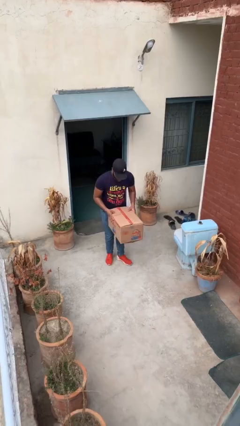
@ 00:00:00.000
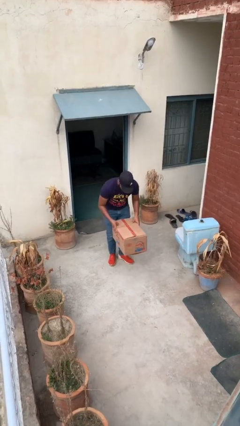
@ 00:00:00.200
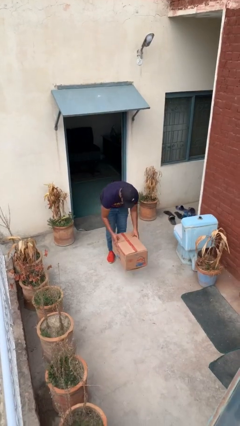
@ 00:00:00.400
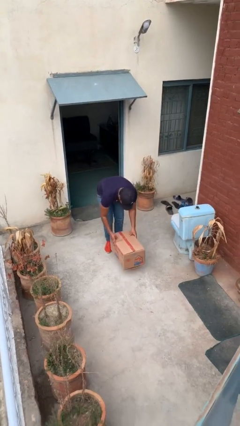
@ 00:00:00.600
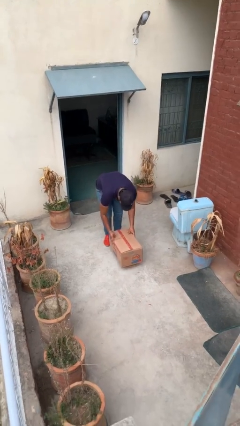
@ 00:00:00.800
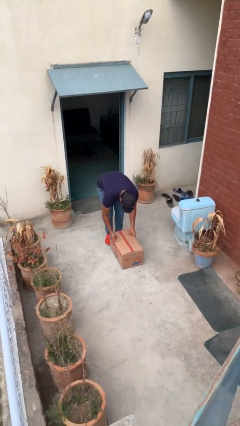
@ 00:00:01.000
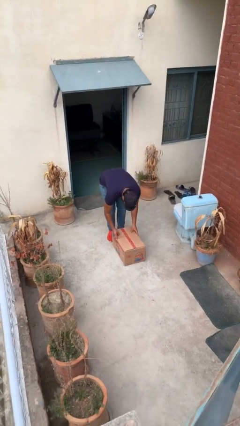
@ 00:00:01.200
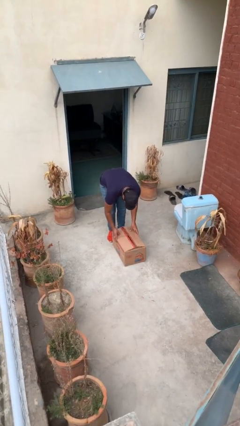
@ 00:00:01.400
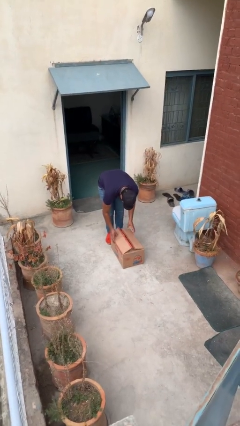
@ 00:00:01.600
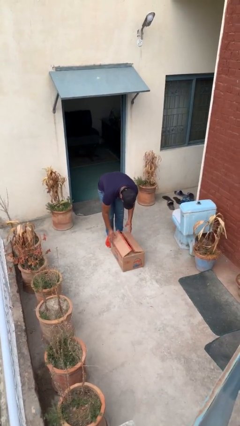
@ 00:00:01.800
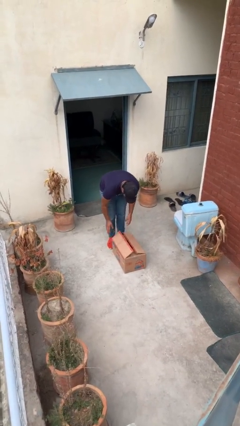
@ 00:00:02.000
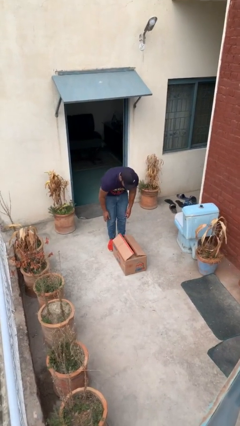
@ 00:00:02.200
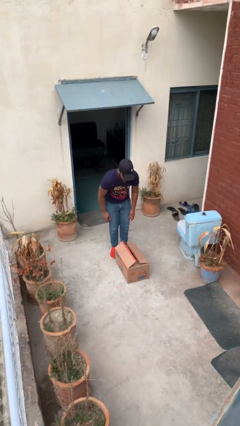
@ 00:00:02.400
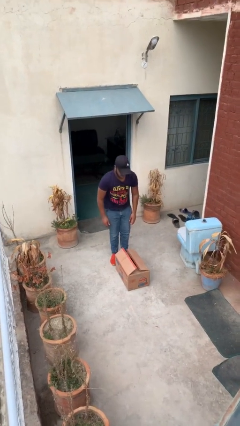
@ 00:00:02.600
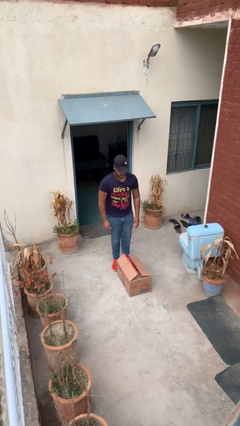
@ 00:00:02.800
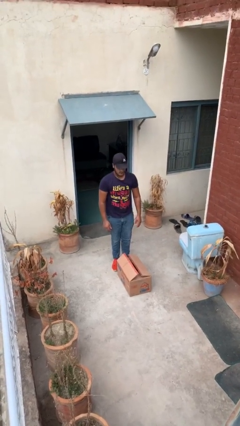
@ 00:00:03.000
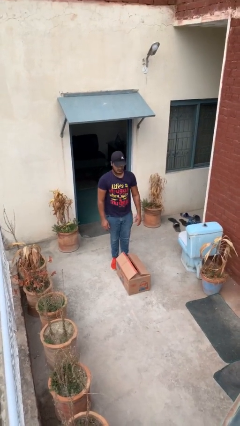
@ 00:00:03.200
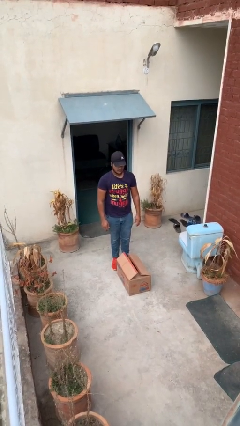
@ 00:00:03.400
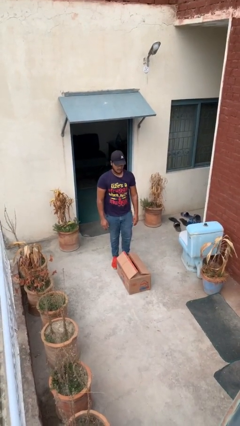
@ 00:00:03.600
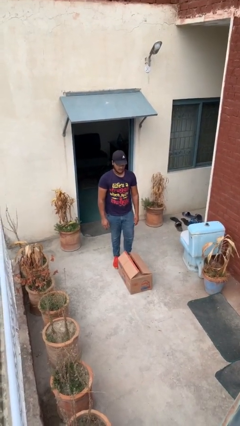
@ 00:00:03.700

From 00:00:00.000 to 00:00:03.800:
person puts down object on floor

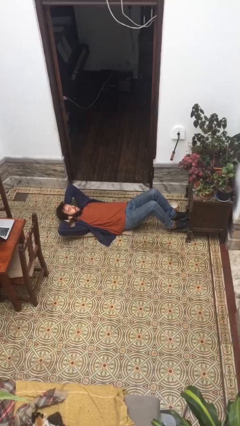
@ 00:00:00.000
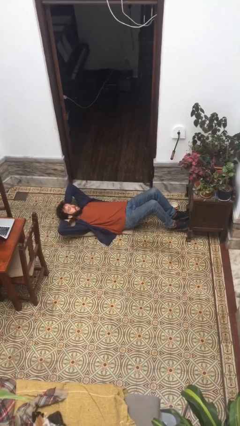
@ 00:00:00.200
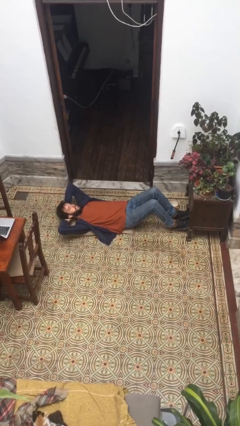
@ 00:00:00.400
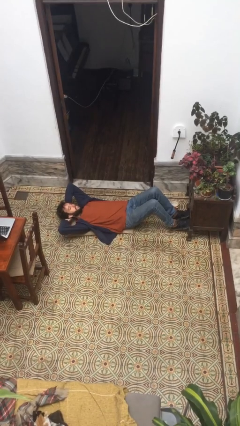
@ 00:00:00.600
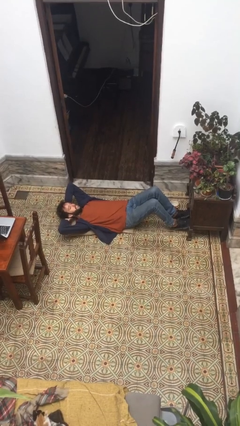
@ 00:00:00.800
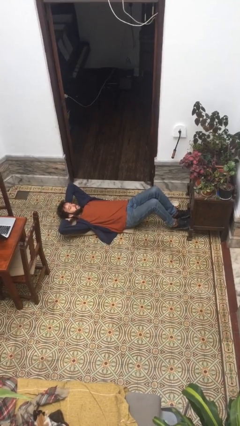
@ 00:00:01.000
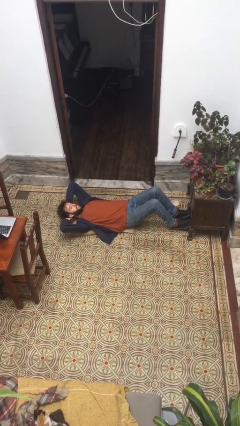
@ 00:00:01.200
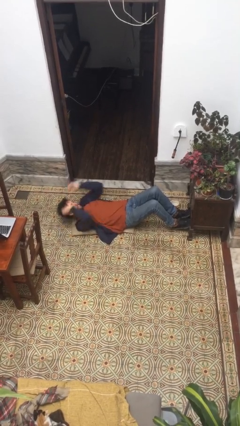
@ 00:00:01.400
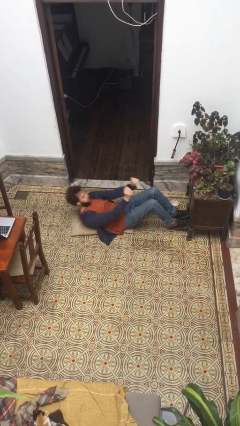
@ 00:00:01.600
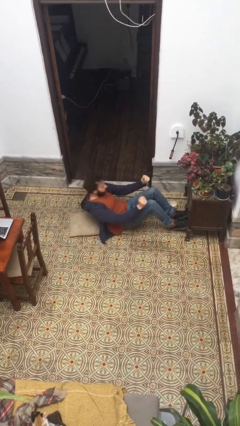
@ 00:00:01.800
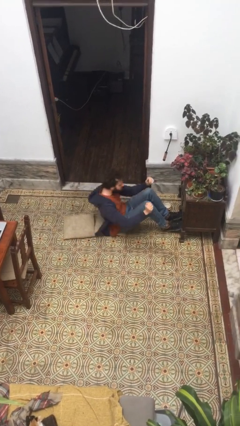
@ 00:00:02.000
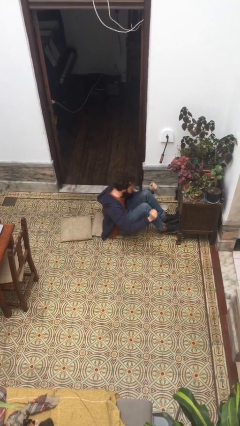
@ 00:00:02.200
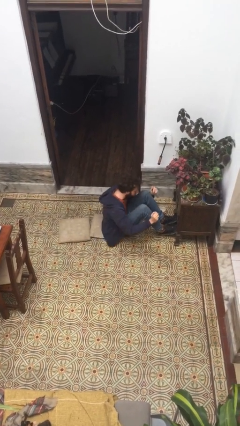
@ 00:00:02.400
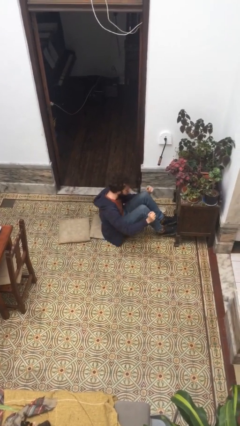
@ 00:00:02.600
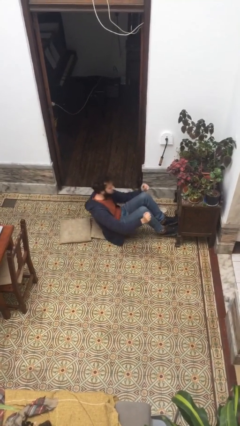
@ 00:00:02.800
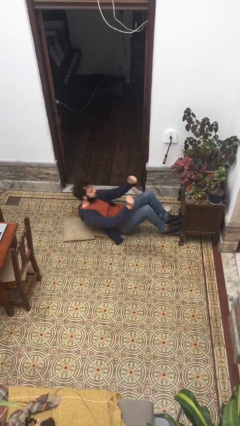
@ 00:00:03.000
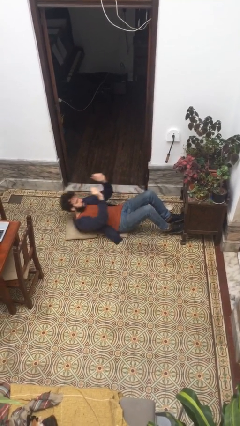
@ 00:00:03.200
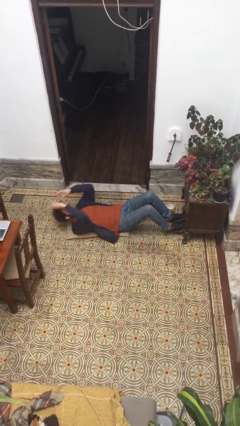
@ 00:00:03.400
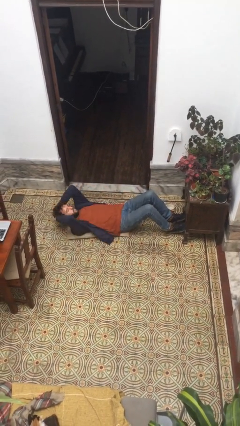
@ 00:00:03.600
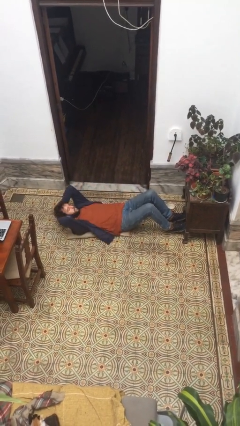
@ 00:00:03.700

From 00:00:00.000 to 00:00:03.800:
person exercises with situp

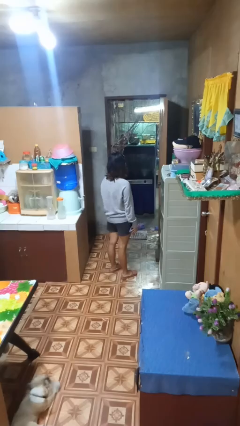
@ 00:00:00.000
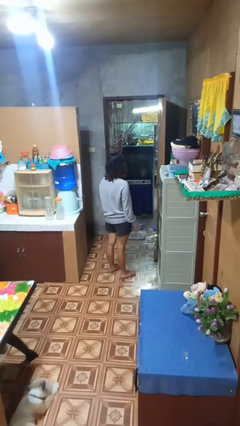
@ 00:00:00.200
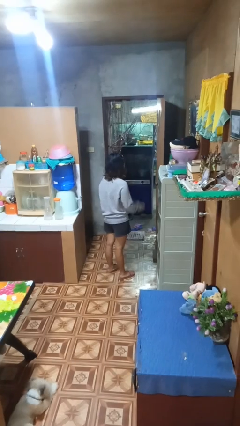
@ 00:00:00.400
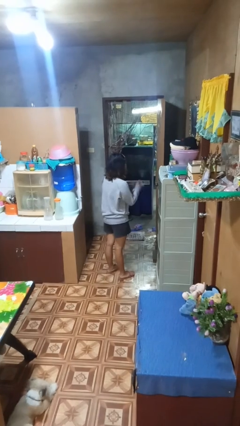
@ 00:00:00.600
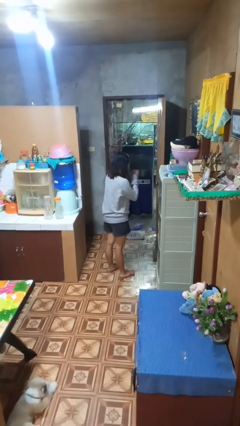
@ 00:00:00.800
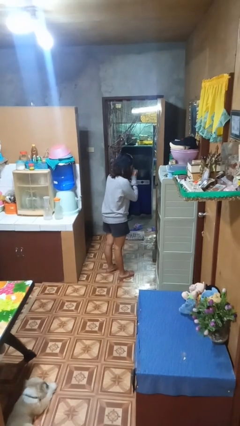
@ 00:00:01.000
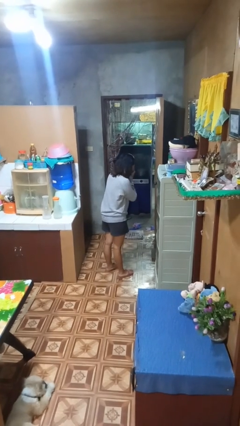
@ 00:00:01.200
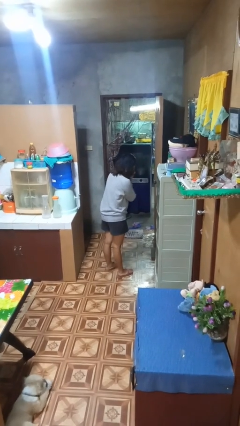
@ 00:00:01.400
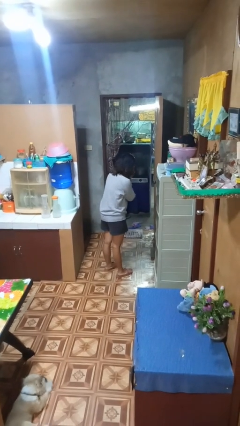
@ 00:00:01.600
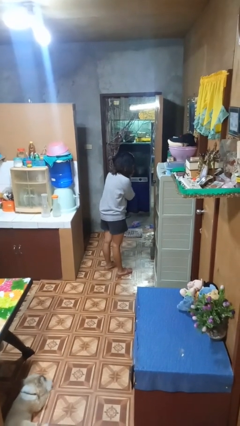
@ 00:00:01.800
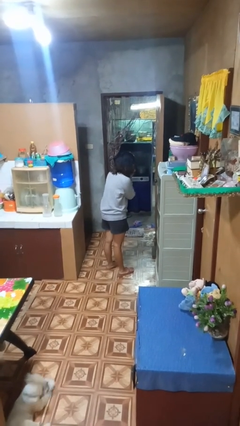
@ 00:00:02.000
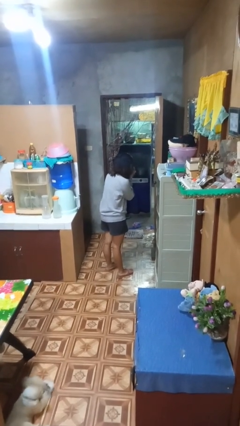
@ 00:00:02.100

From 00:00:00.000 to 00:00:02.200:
person blows nose

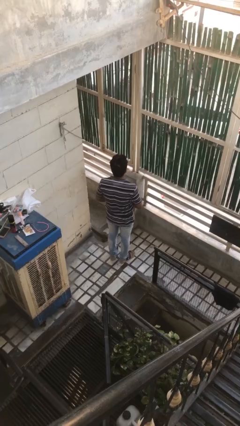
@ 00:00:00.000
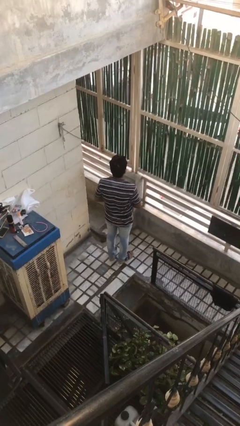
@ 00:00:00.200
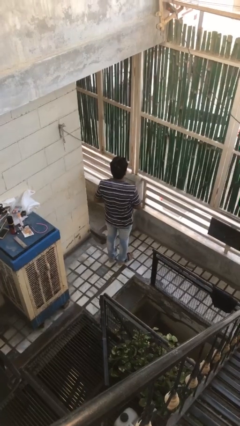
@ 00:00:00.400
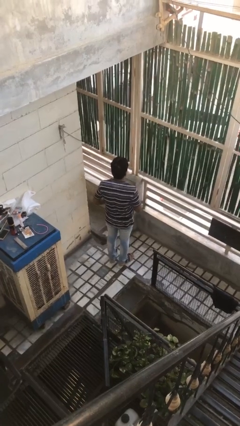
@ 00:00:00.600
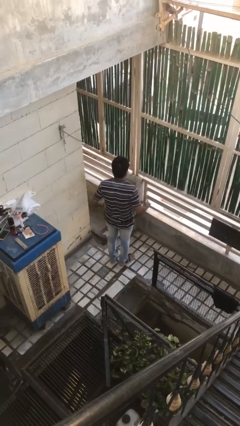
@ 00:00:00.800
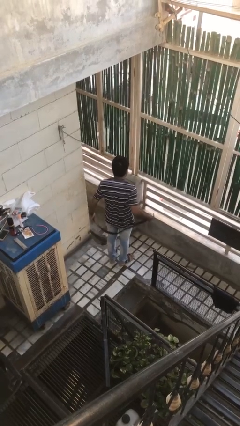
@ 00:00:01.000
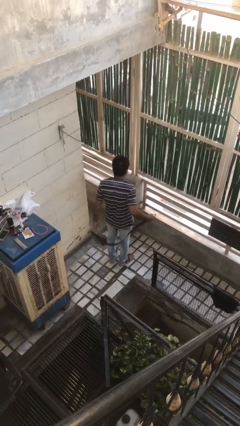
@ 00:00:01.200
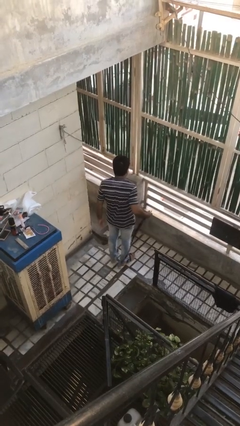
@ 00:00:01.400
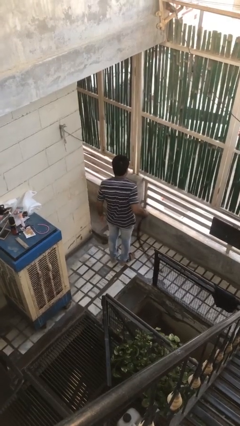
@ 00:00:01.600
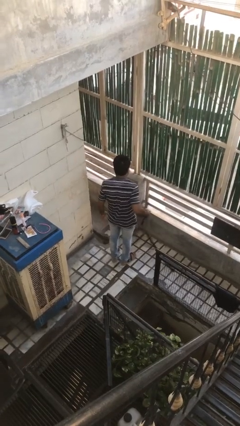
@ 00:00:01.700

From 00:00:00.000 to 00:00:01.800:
person takes off belt

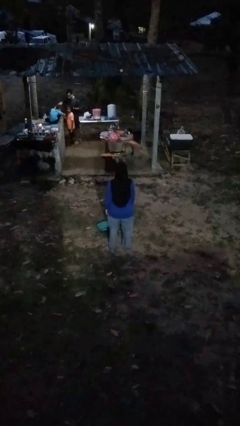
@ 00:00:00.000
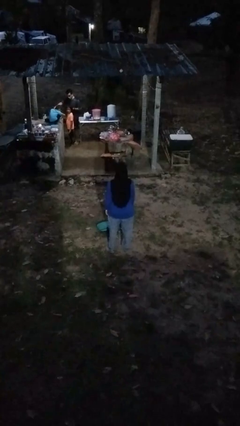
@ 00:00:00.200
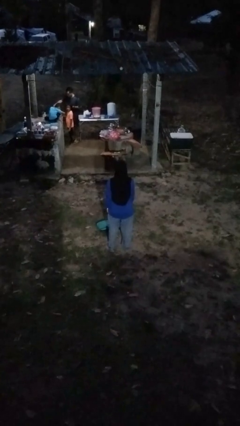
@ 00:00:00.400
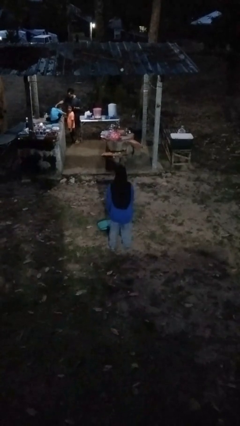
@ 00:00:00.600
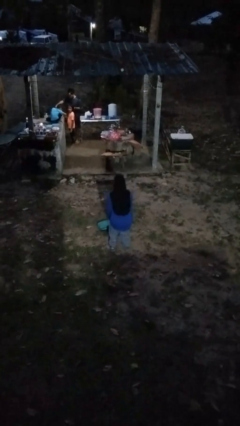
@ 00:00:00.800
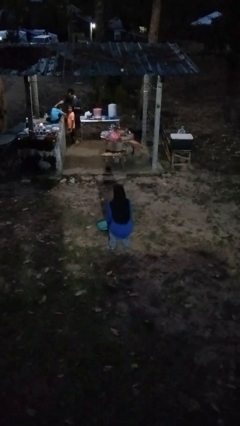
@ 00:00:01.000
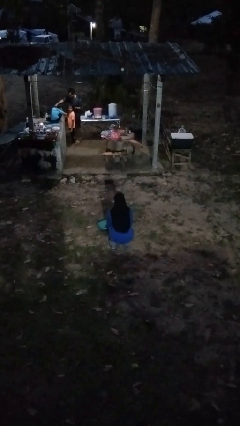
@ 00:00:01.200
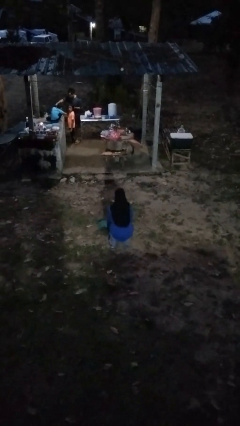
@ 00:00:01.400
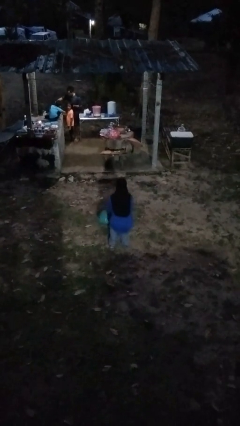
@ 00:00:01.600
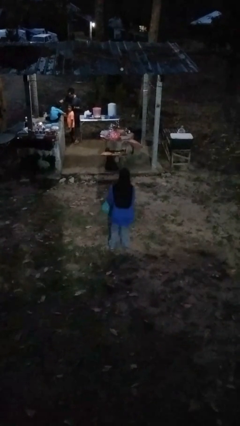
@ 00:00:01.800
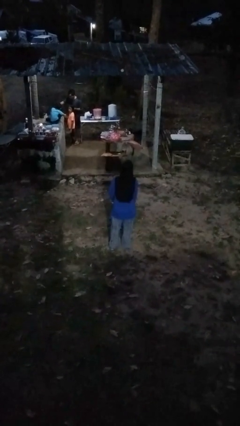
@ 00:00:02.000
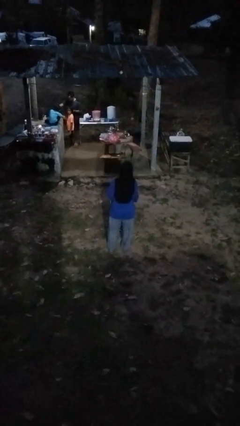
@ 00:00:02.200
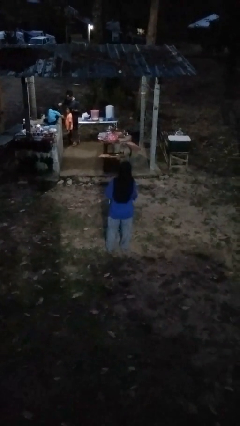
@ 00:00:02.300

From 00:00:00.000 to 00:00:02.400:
person picks up object from floor

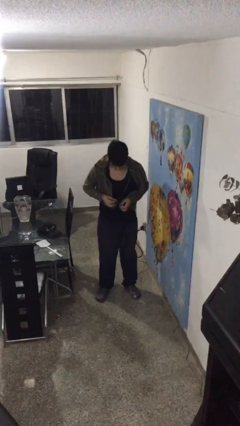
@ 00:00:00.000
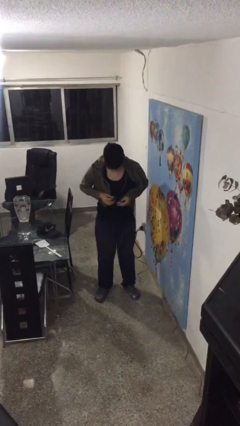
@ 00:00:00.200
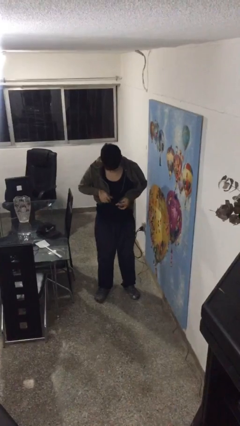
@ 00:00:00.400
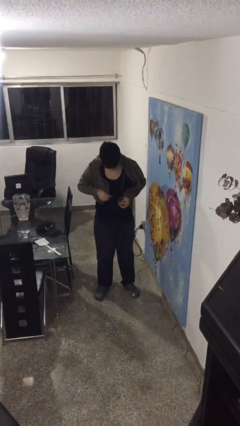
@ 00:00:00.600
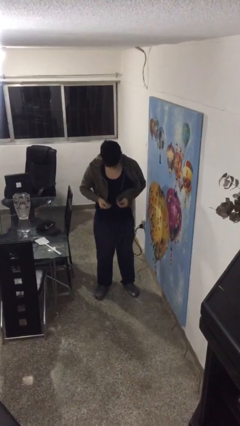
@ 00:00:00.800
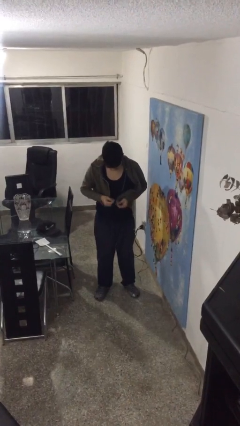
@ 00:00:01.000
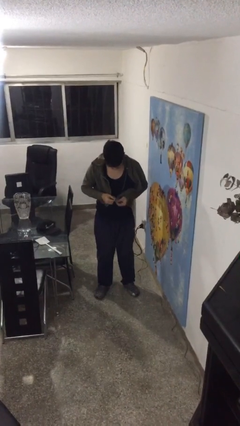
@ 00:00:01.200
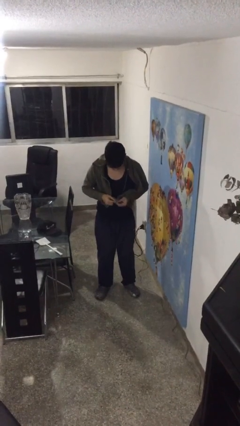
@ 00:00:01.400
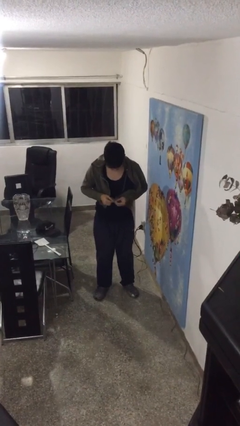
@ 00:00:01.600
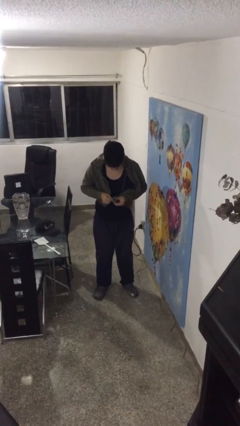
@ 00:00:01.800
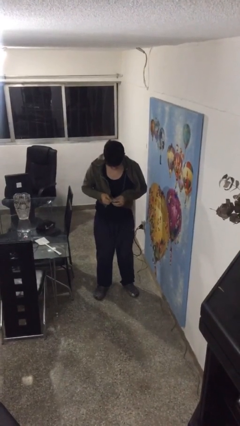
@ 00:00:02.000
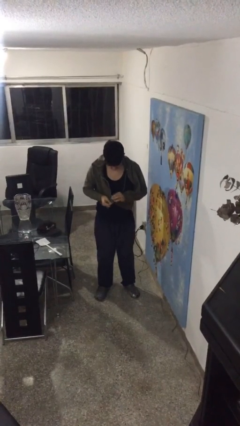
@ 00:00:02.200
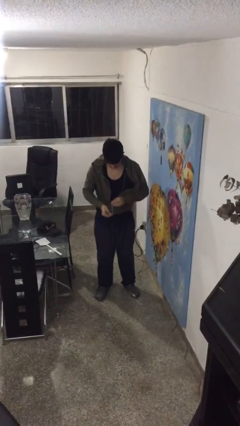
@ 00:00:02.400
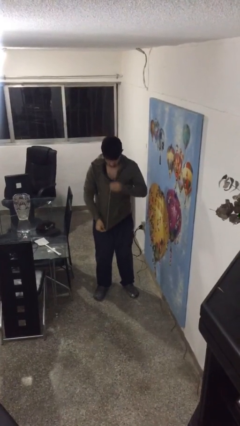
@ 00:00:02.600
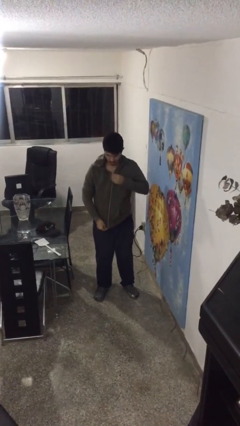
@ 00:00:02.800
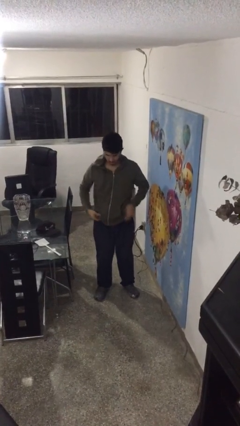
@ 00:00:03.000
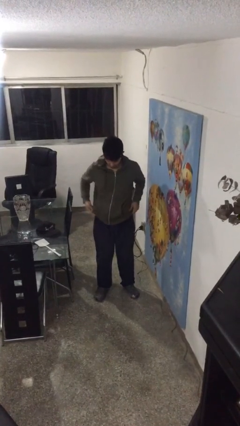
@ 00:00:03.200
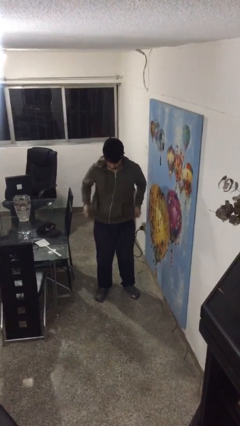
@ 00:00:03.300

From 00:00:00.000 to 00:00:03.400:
person zips up jacket
